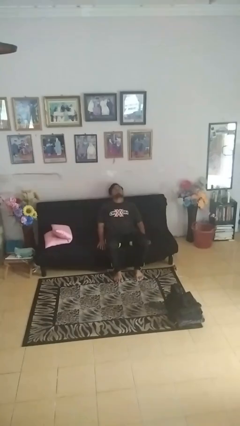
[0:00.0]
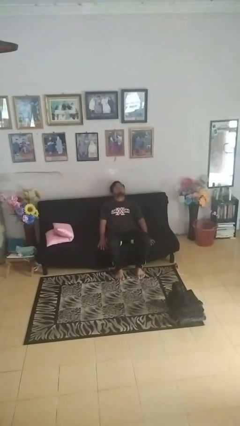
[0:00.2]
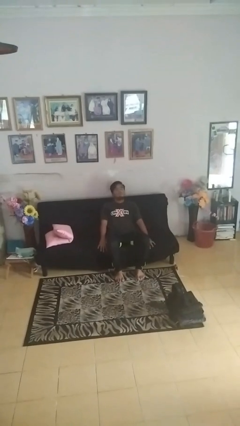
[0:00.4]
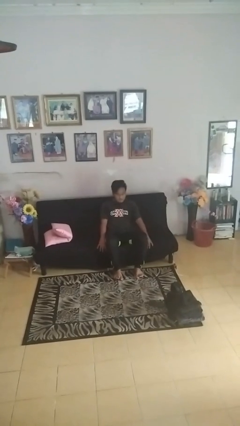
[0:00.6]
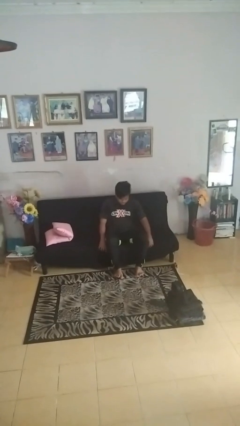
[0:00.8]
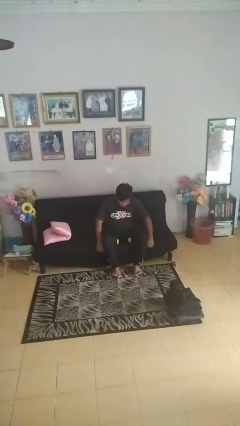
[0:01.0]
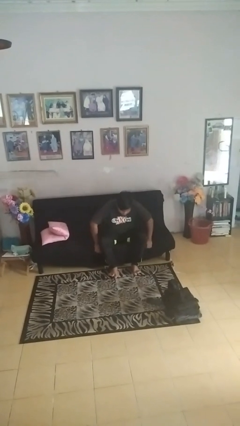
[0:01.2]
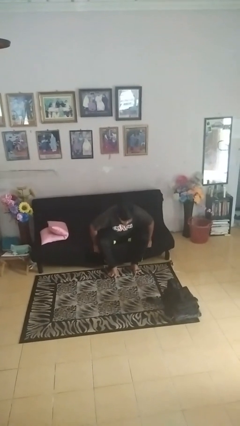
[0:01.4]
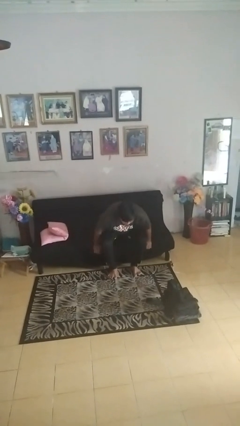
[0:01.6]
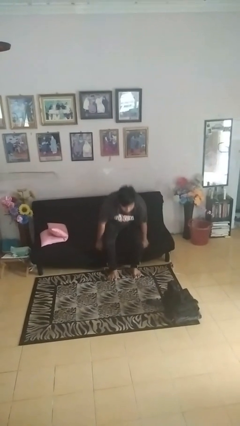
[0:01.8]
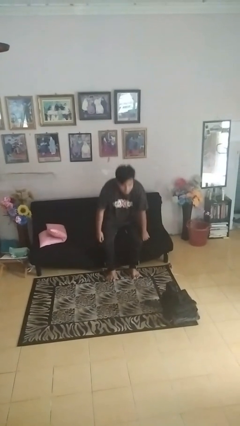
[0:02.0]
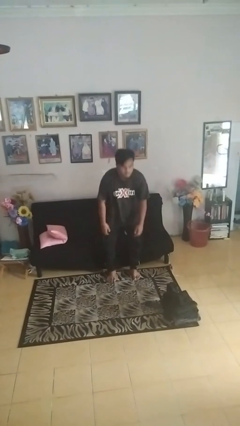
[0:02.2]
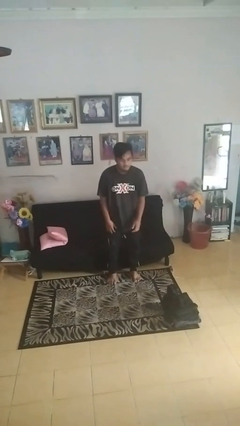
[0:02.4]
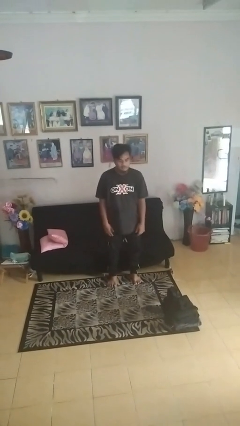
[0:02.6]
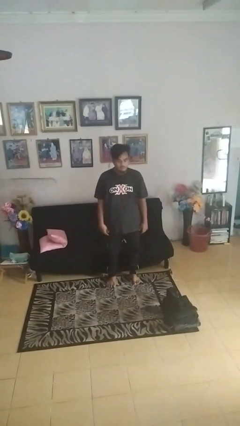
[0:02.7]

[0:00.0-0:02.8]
person stands up

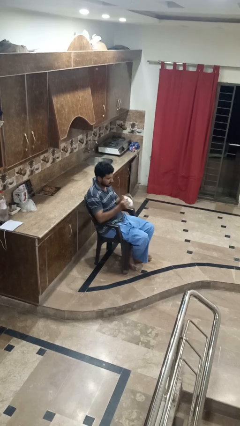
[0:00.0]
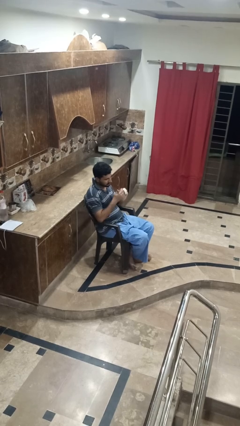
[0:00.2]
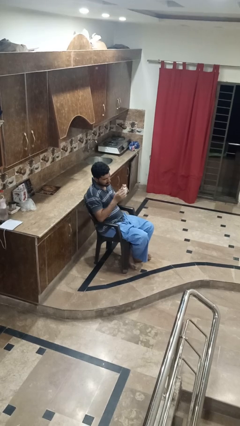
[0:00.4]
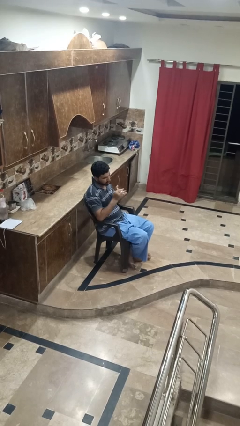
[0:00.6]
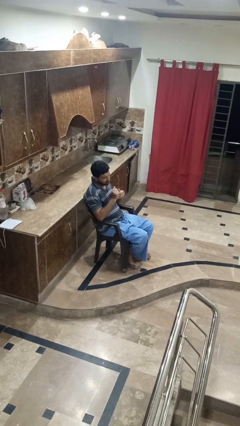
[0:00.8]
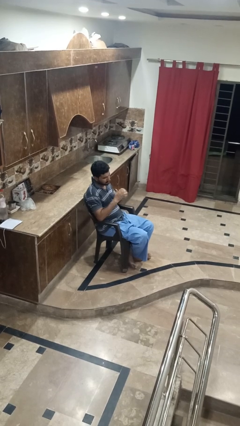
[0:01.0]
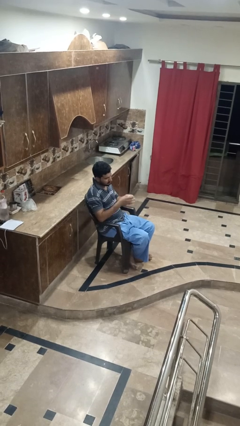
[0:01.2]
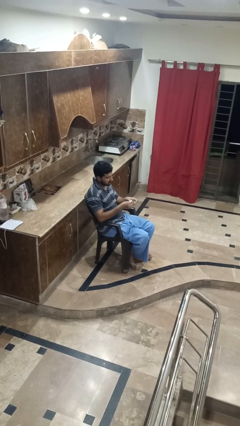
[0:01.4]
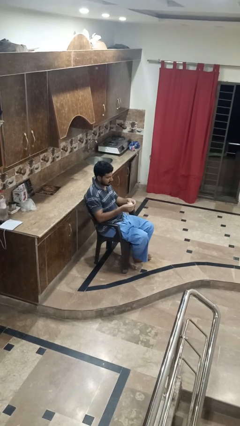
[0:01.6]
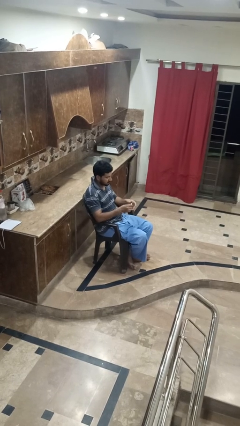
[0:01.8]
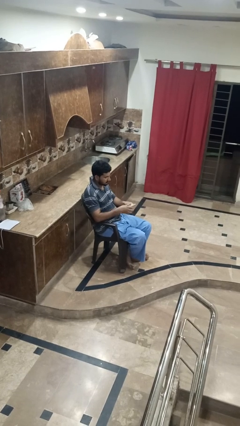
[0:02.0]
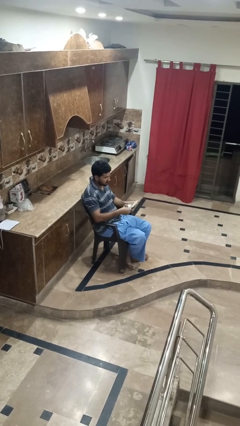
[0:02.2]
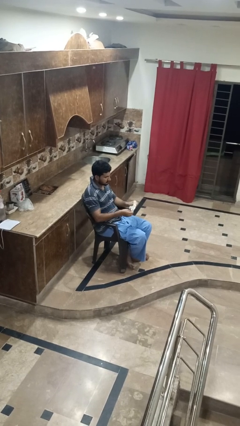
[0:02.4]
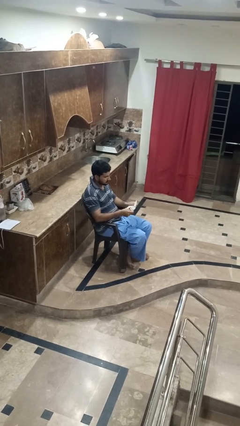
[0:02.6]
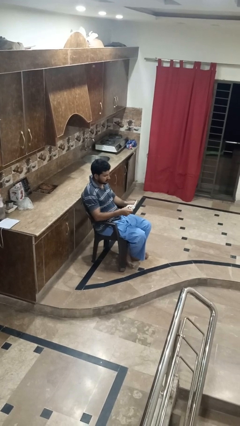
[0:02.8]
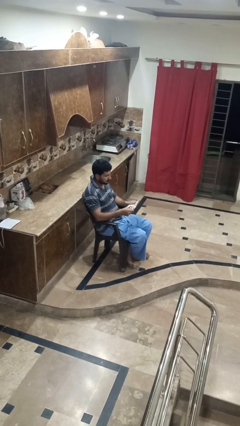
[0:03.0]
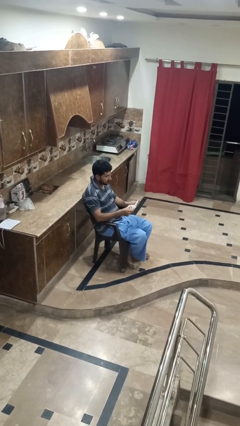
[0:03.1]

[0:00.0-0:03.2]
person crumples paper

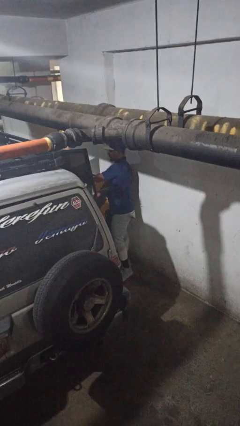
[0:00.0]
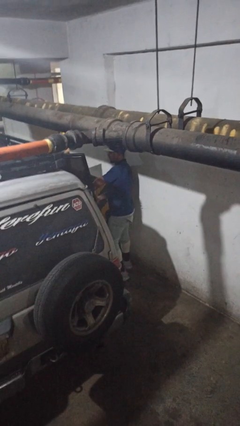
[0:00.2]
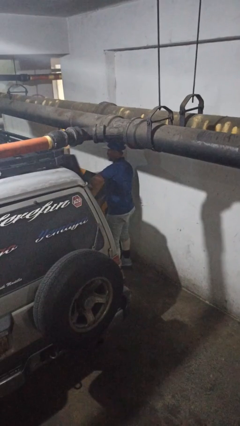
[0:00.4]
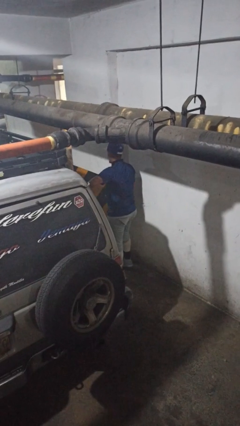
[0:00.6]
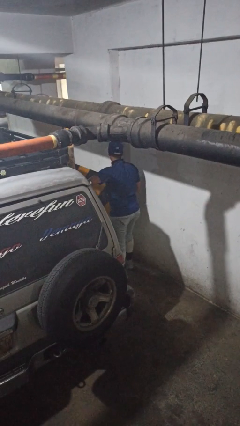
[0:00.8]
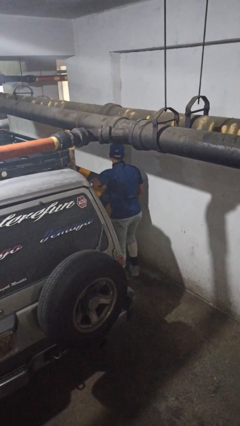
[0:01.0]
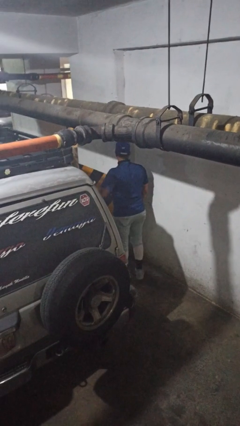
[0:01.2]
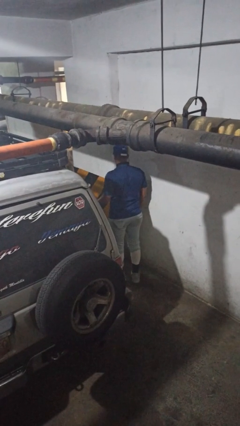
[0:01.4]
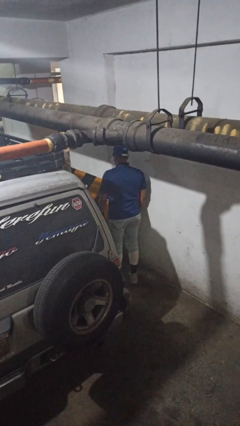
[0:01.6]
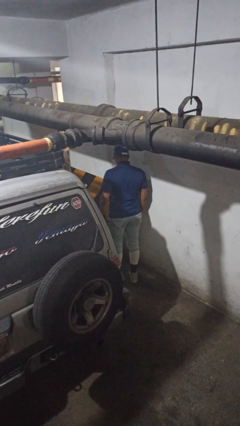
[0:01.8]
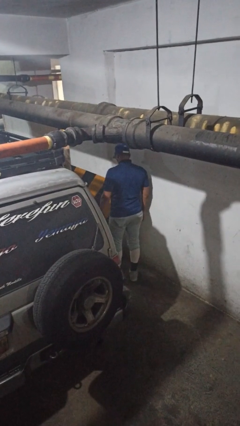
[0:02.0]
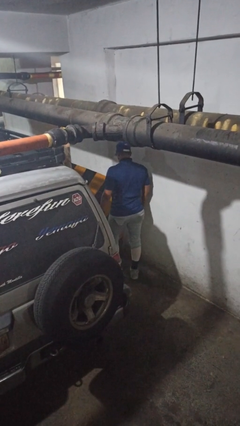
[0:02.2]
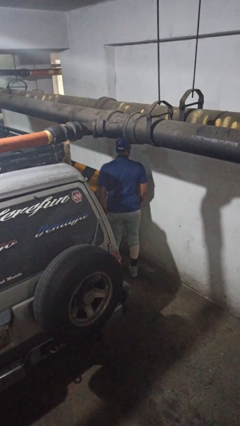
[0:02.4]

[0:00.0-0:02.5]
person closes car door

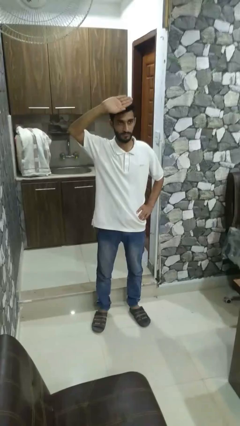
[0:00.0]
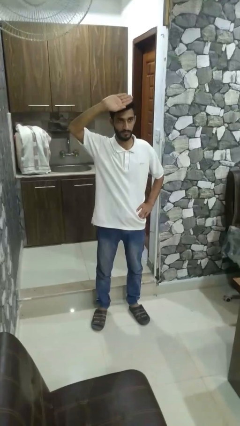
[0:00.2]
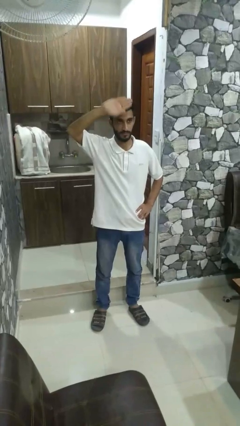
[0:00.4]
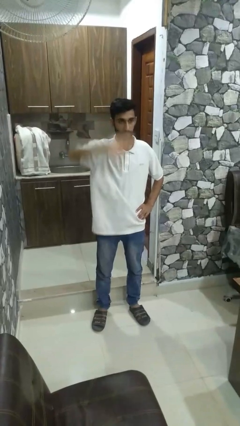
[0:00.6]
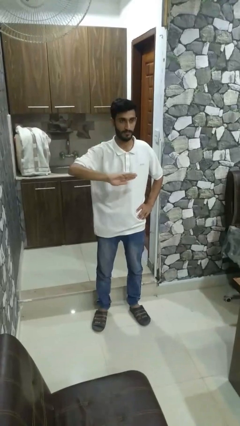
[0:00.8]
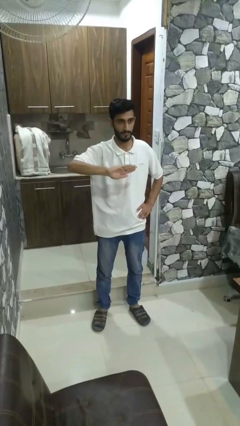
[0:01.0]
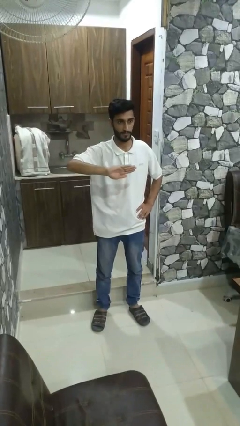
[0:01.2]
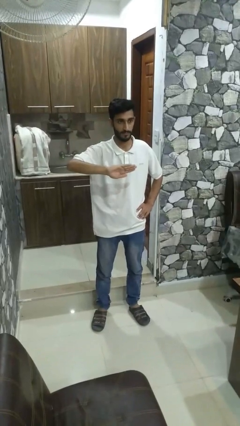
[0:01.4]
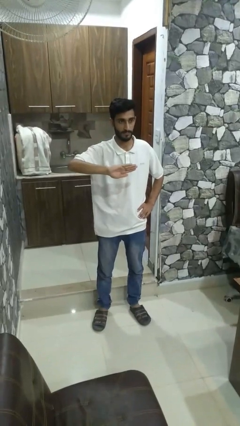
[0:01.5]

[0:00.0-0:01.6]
person gestures swipe down

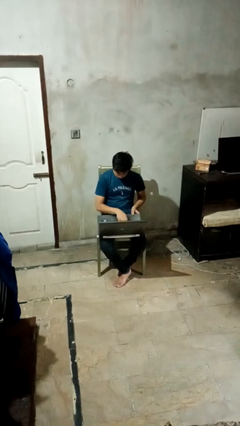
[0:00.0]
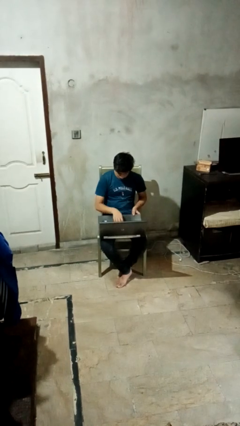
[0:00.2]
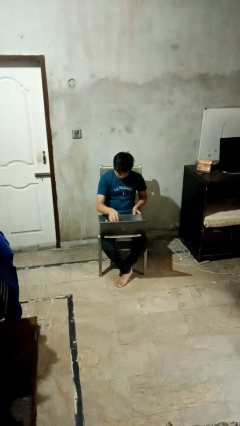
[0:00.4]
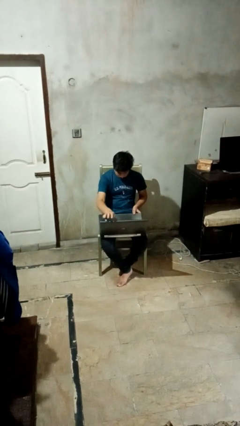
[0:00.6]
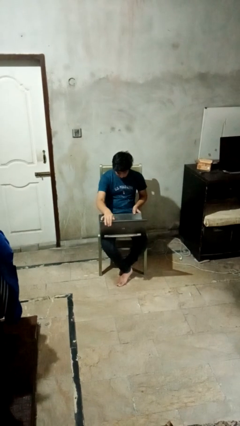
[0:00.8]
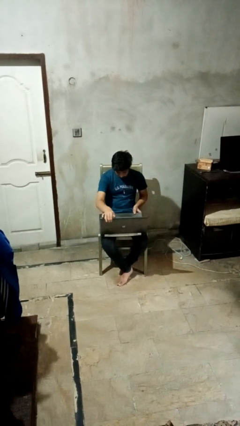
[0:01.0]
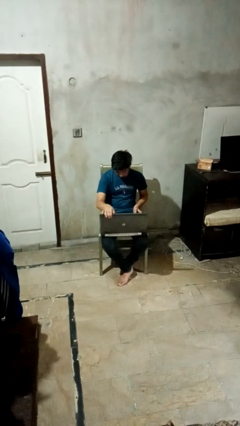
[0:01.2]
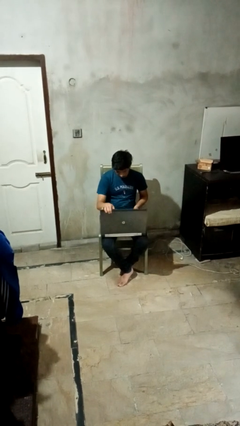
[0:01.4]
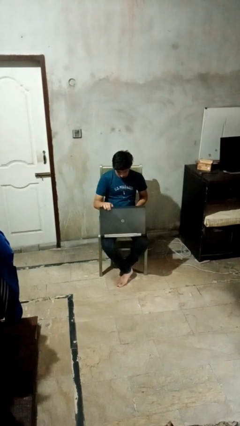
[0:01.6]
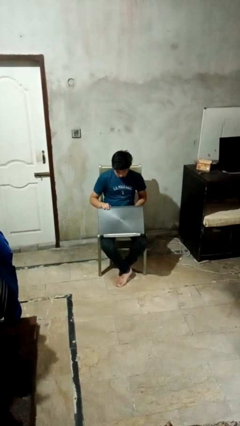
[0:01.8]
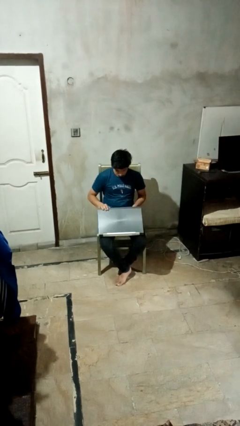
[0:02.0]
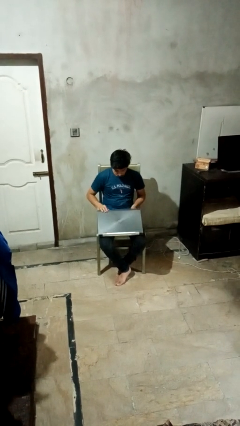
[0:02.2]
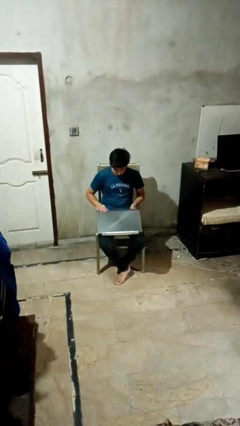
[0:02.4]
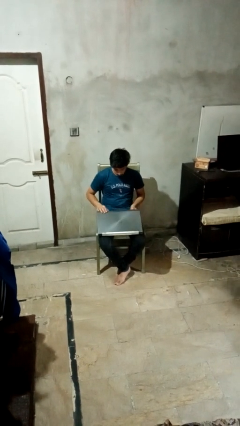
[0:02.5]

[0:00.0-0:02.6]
person closes laptop

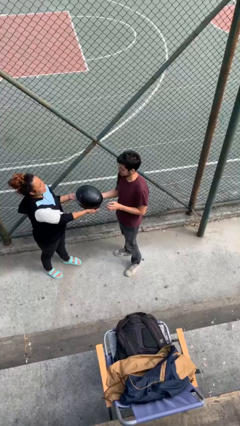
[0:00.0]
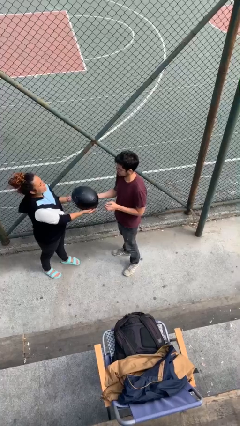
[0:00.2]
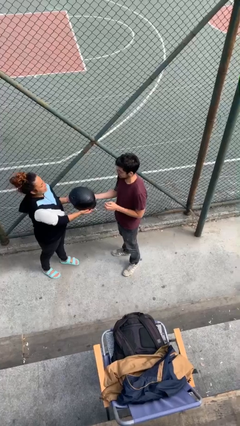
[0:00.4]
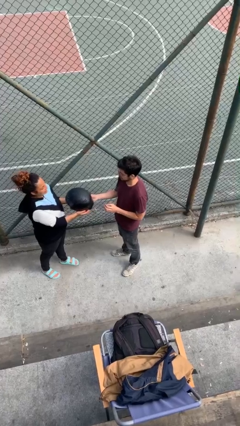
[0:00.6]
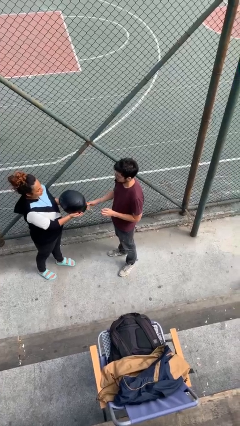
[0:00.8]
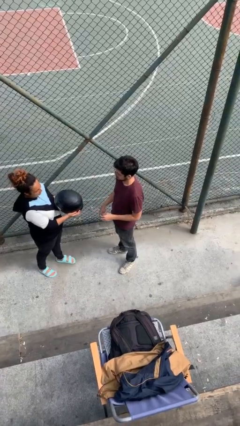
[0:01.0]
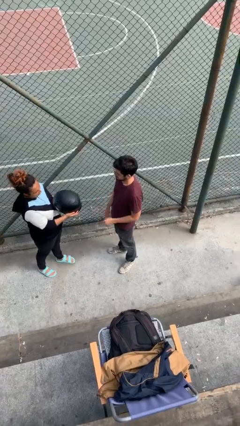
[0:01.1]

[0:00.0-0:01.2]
person transfers object to person

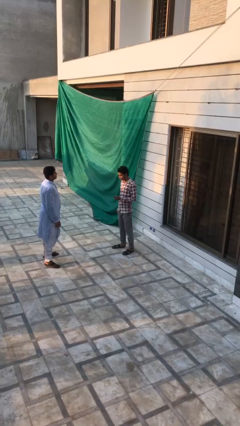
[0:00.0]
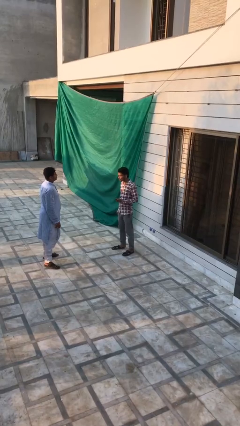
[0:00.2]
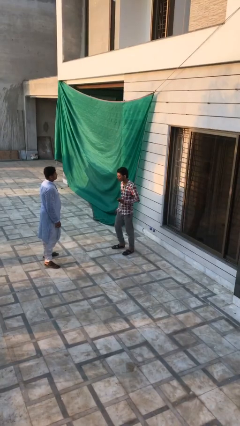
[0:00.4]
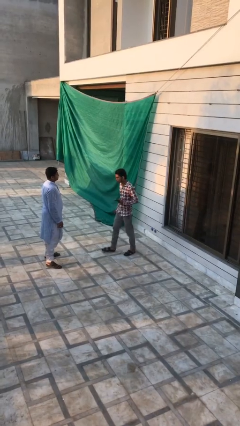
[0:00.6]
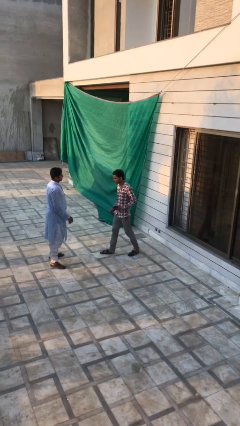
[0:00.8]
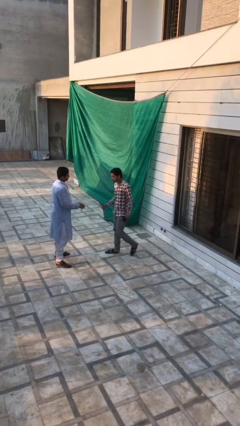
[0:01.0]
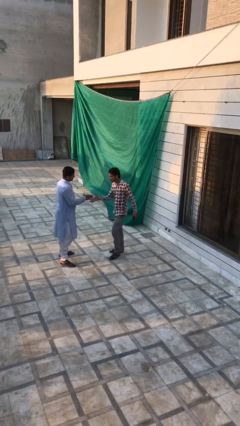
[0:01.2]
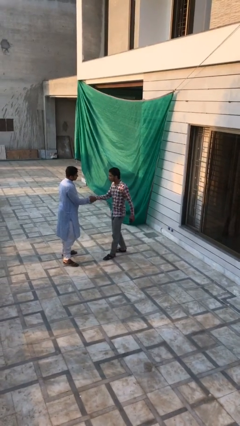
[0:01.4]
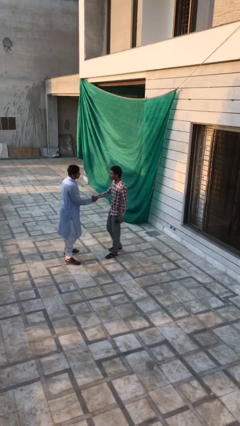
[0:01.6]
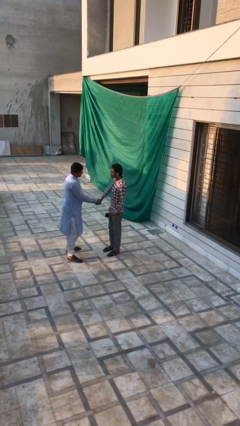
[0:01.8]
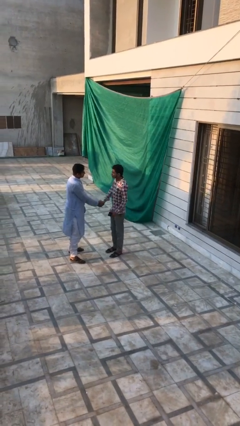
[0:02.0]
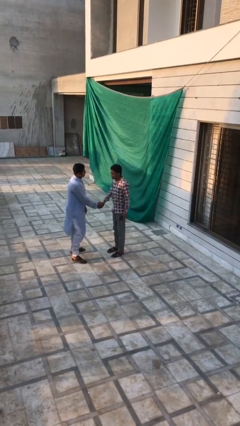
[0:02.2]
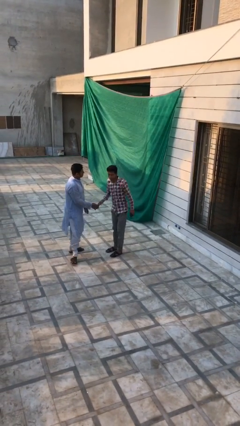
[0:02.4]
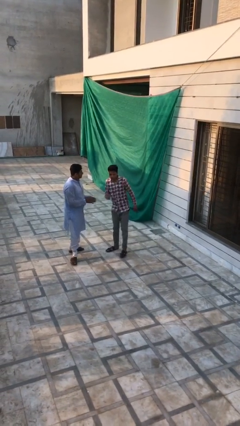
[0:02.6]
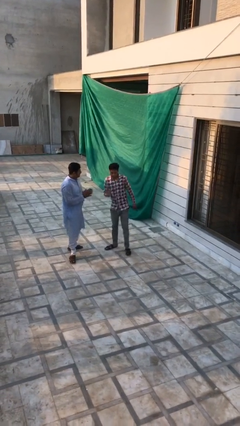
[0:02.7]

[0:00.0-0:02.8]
person shakes hand

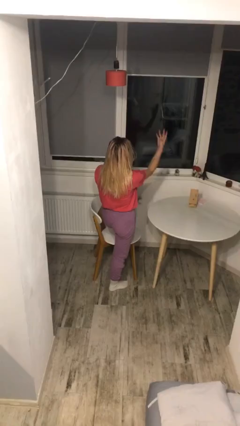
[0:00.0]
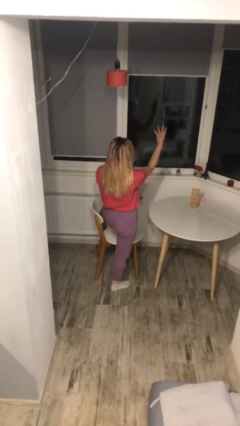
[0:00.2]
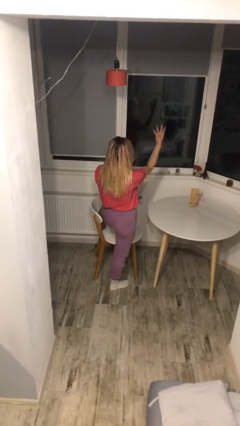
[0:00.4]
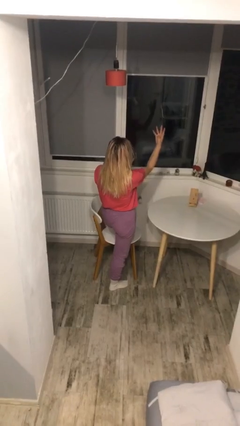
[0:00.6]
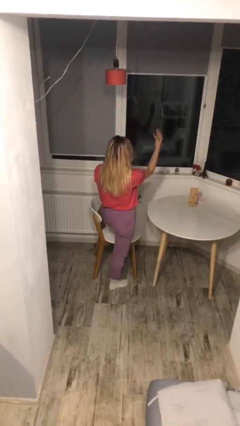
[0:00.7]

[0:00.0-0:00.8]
person gestures number four
